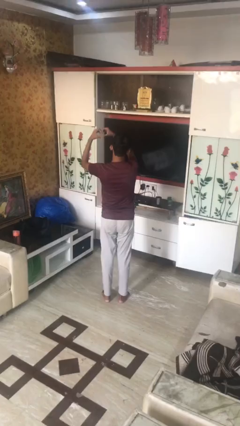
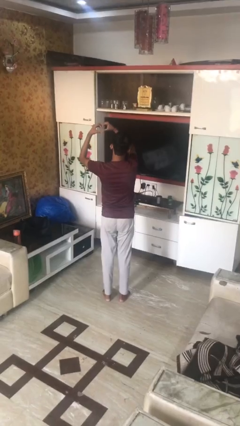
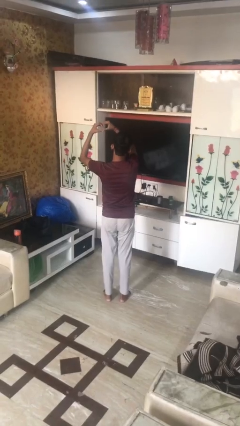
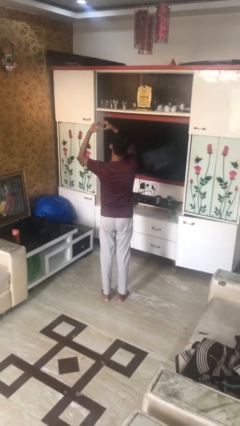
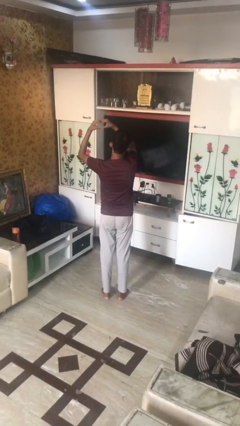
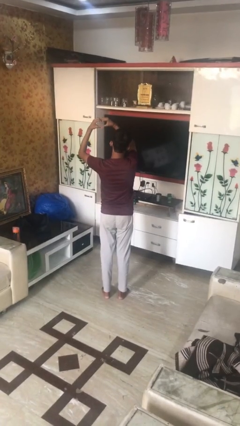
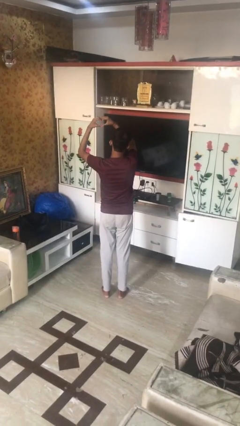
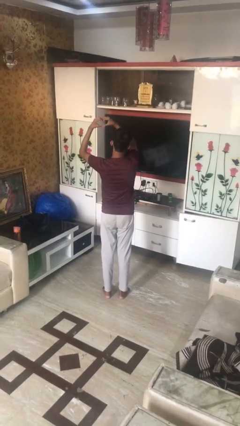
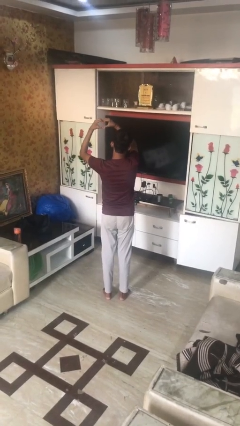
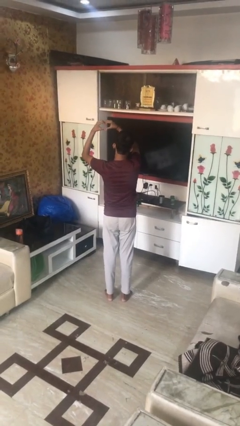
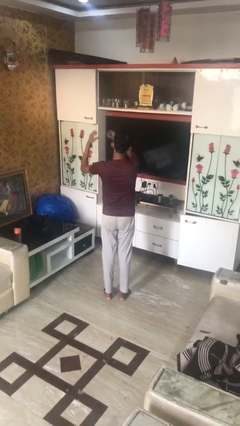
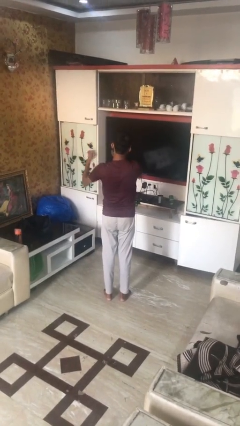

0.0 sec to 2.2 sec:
person gestures heart

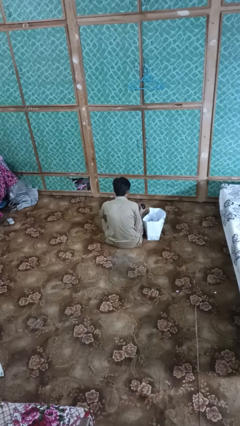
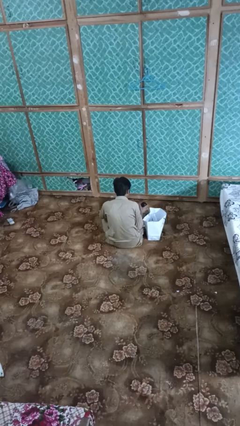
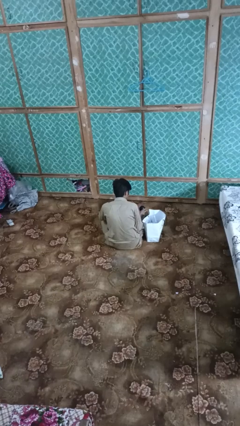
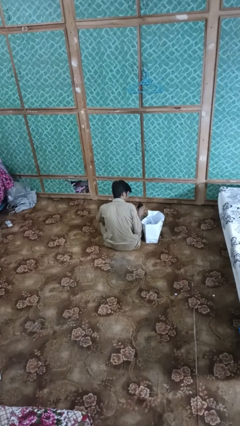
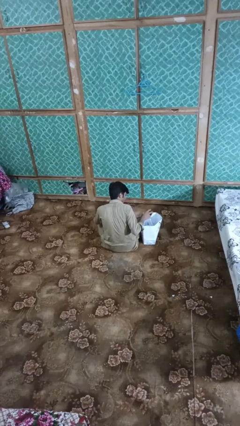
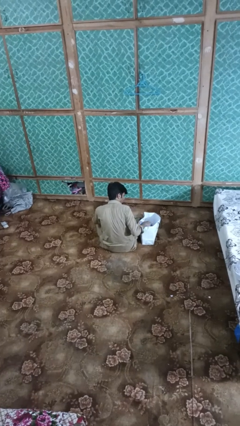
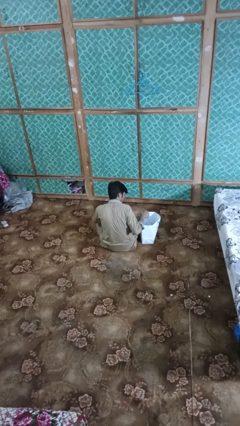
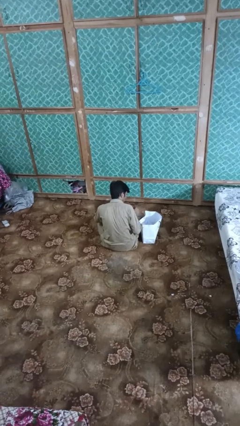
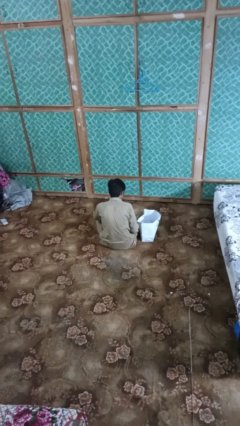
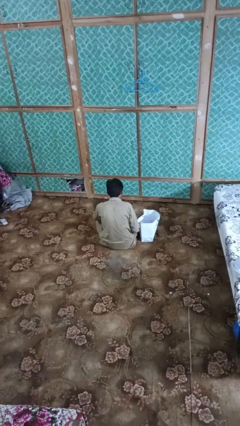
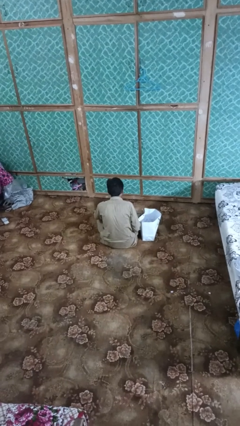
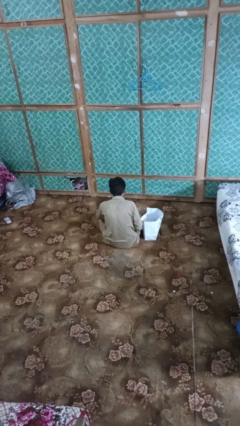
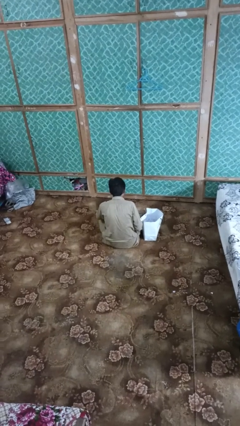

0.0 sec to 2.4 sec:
person puts object into bag

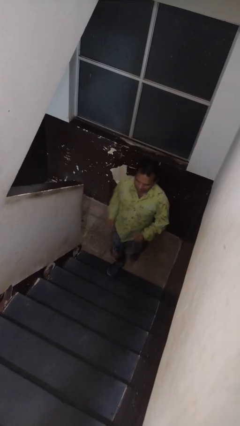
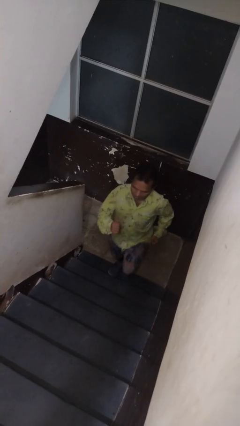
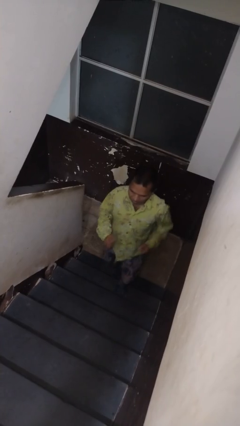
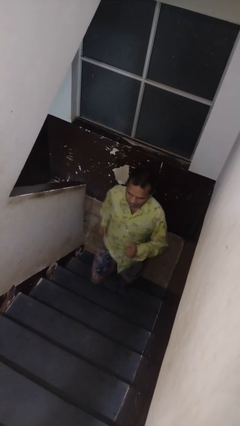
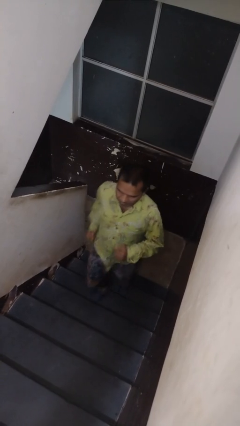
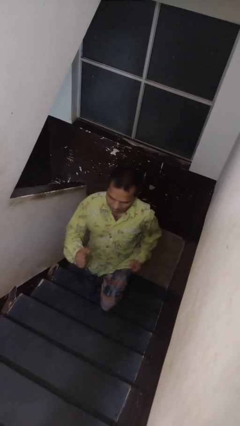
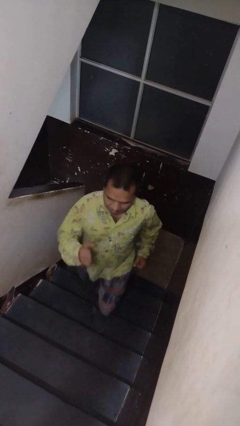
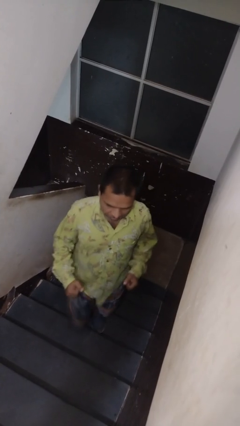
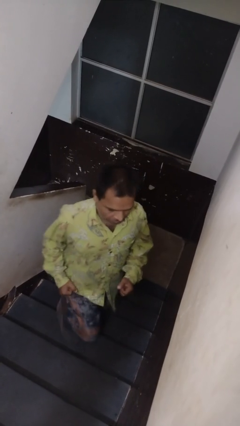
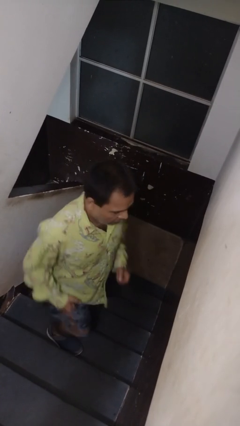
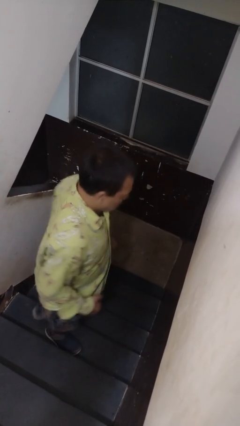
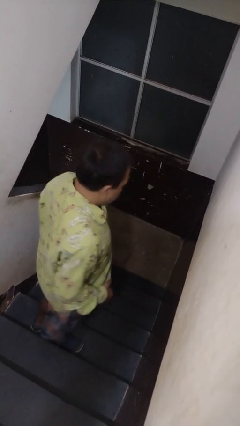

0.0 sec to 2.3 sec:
person climbs up stairs

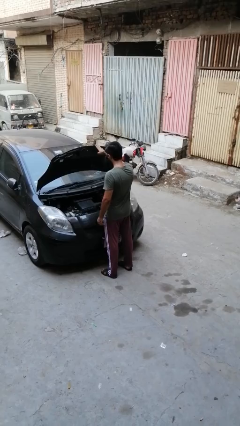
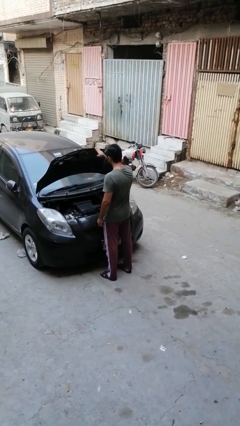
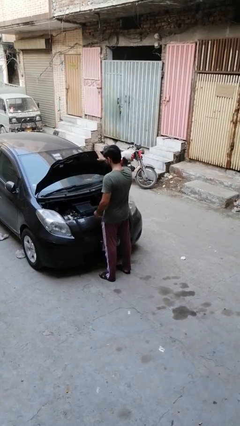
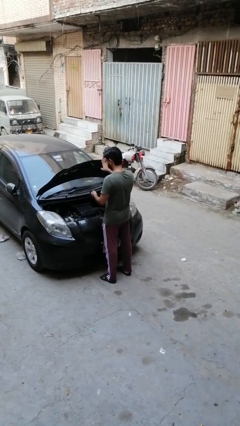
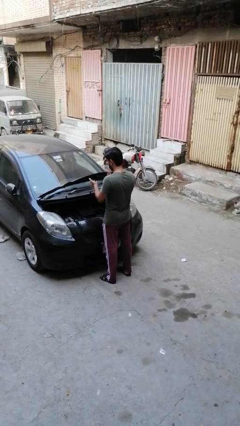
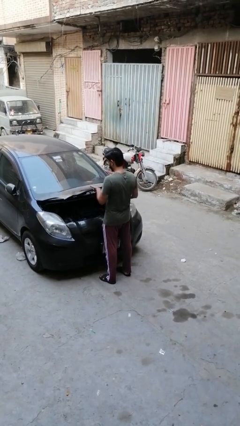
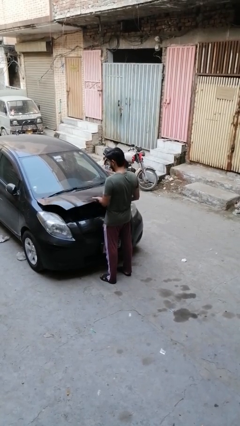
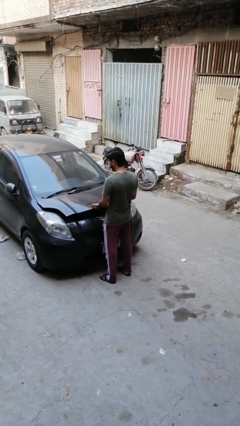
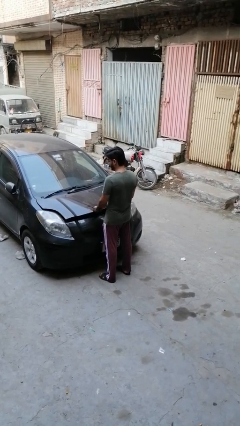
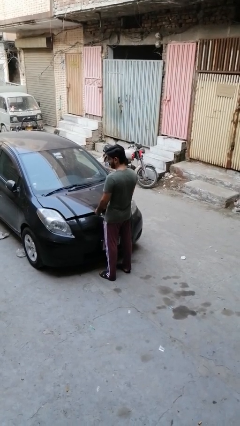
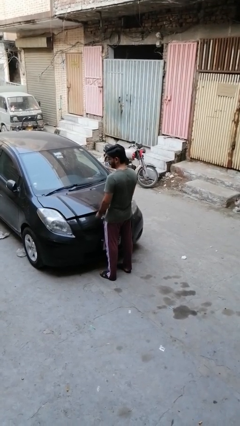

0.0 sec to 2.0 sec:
person closes car hood

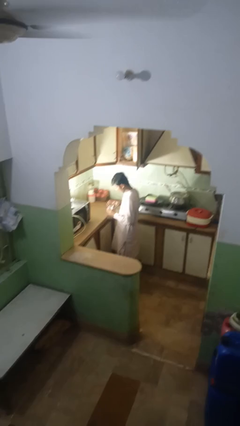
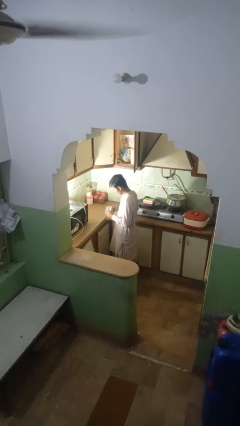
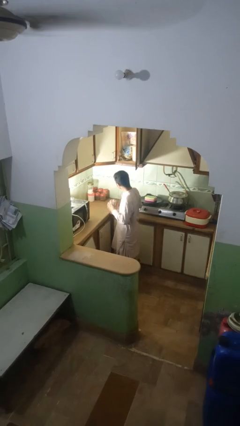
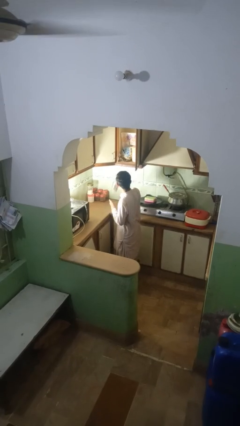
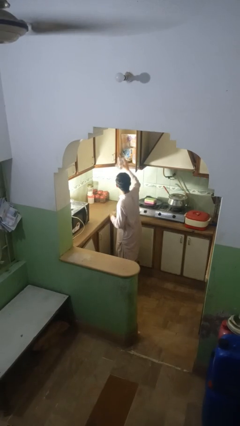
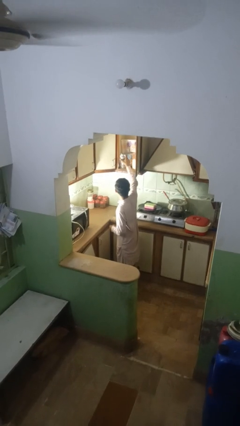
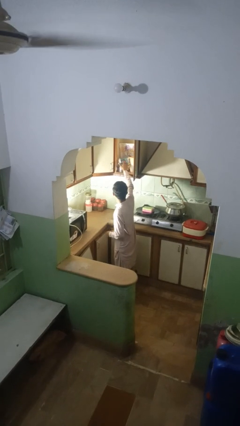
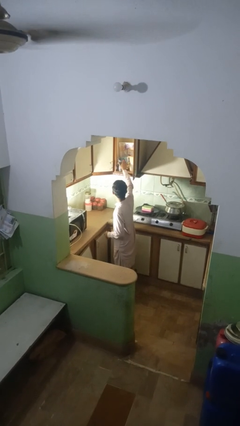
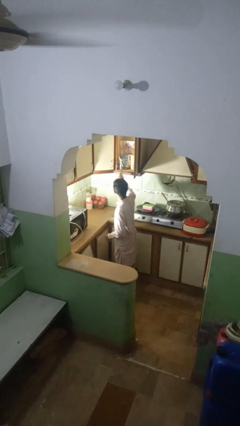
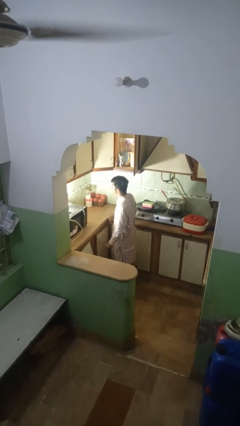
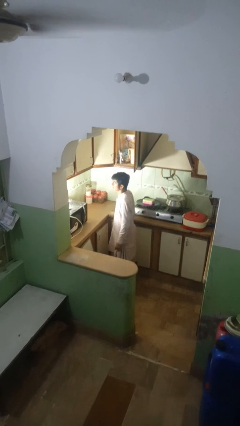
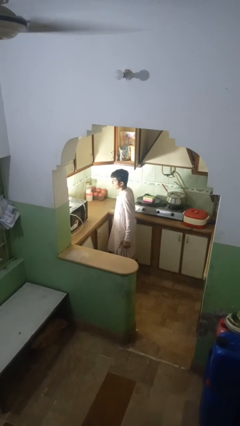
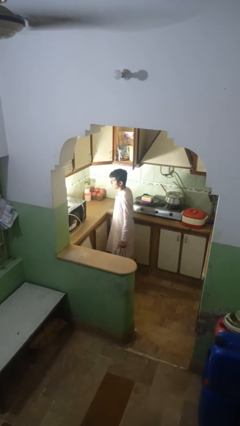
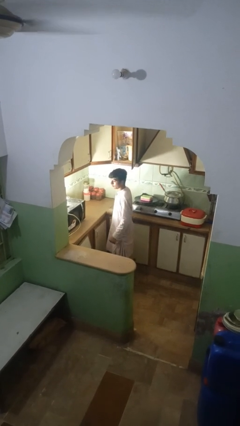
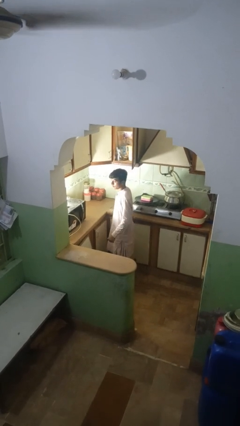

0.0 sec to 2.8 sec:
person puts object into kitchen drawer

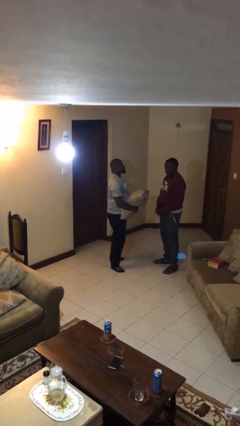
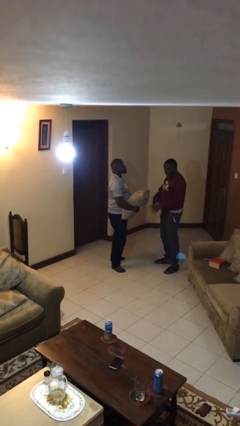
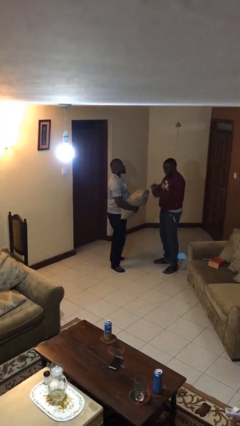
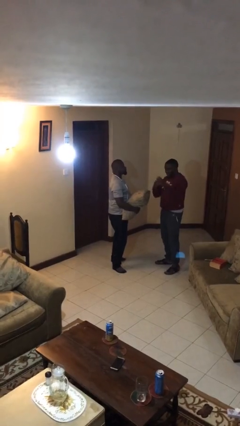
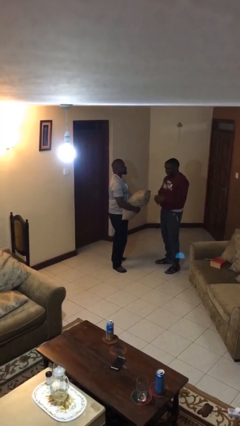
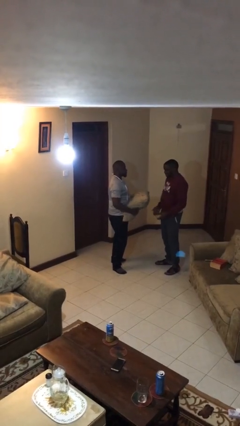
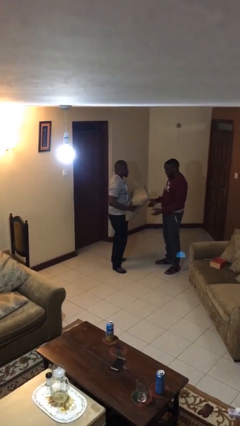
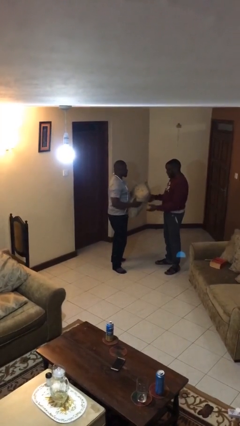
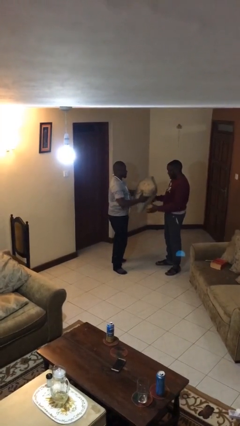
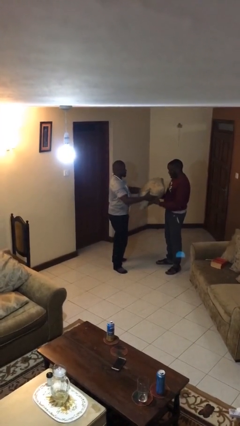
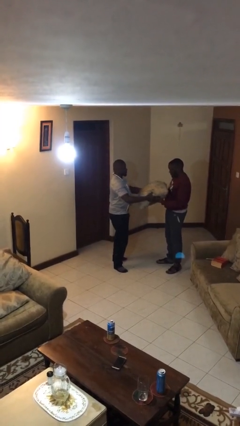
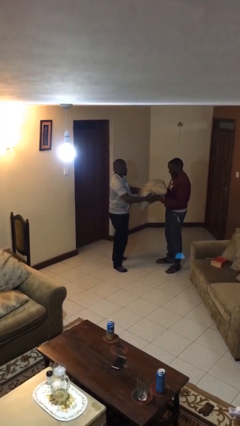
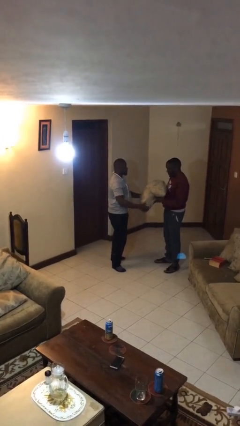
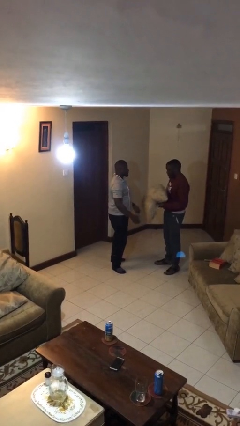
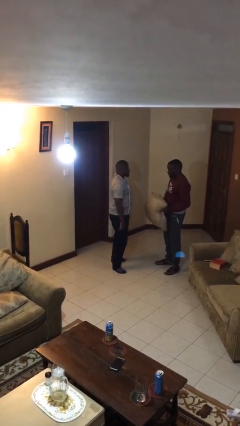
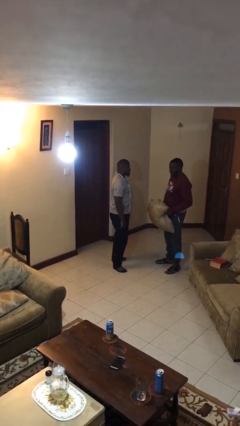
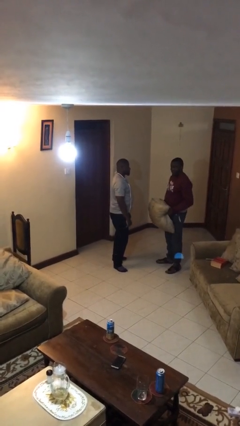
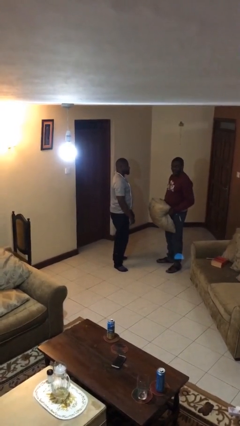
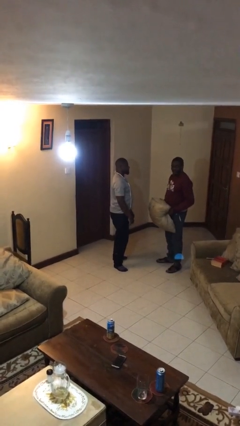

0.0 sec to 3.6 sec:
person transfers object to person

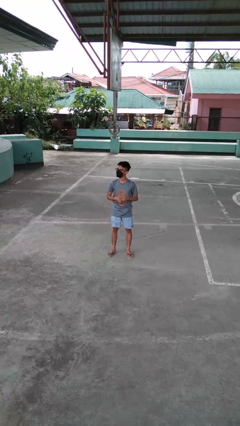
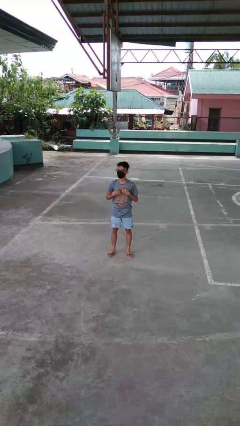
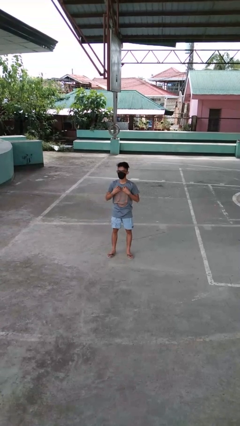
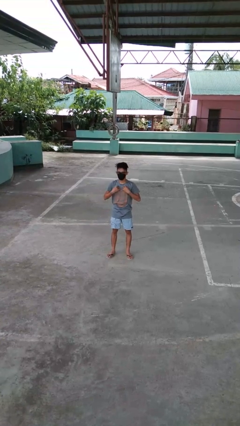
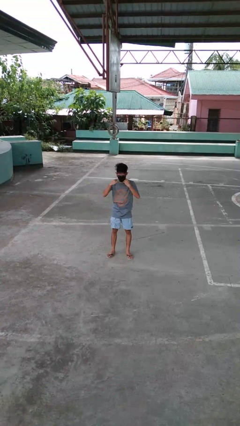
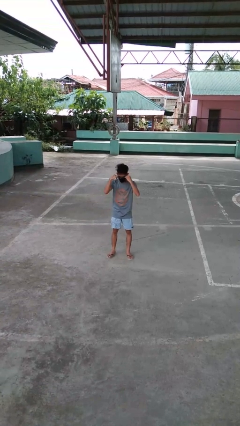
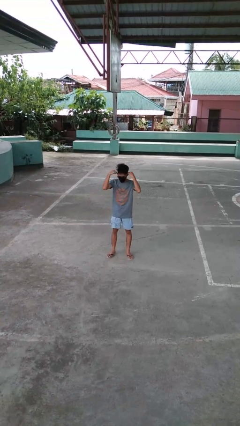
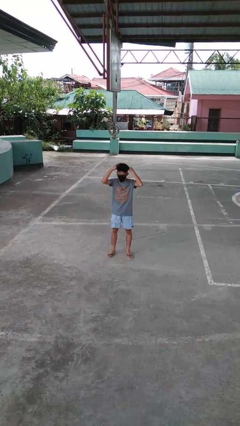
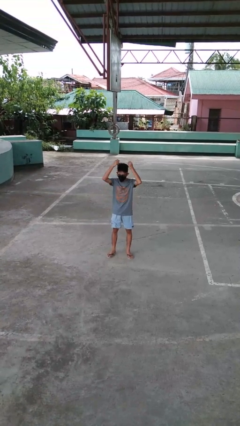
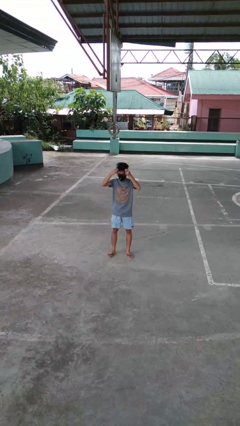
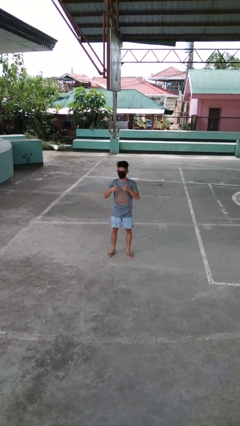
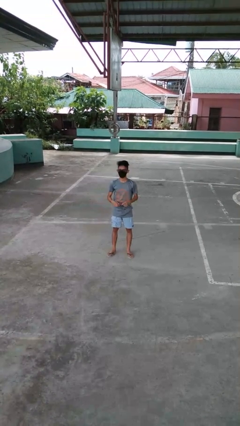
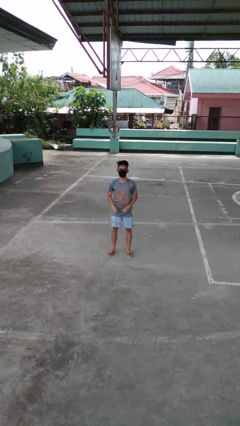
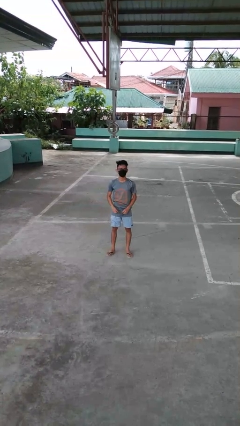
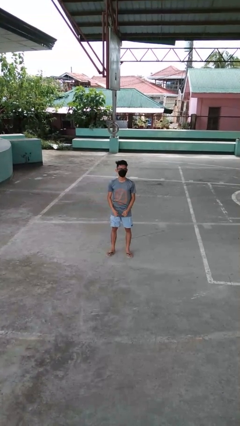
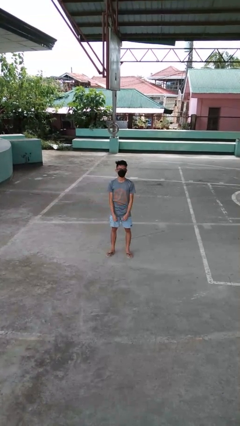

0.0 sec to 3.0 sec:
person takes off necklace
